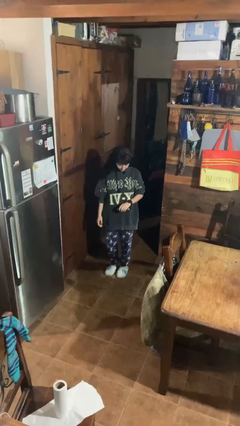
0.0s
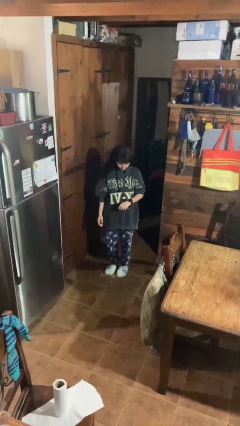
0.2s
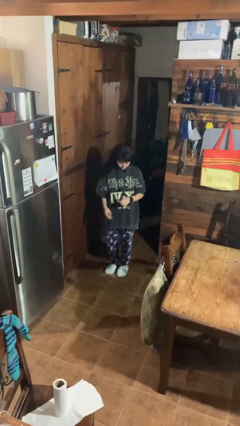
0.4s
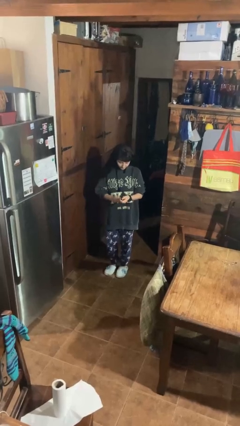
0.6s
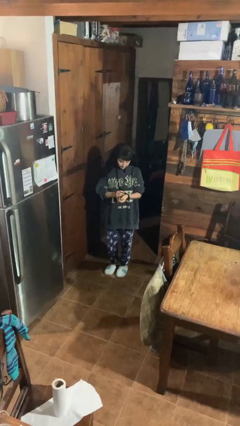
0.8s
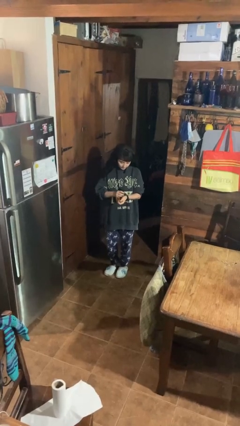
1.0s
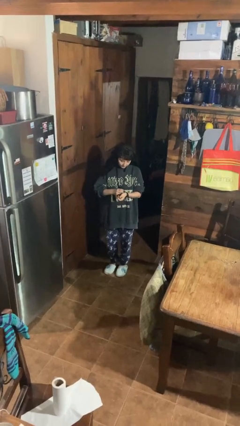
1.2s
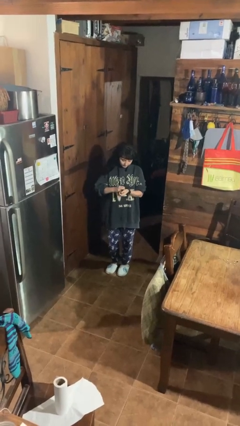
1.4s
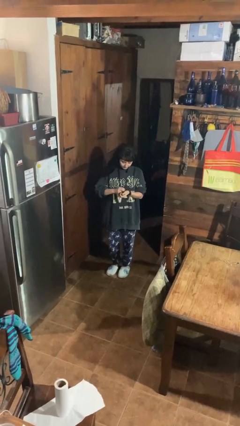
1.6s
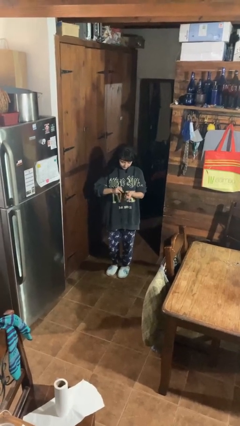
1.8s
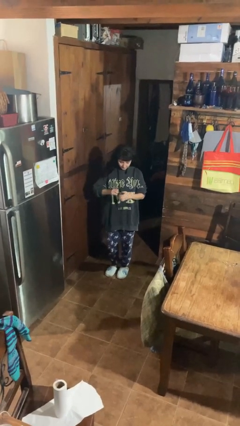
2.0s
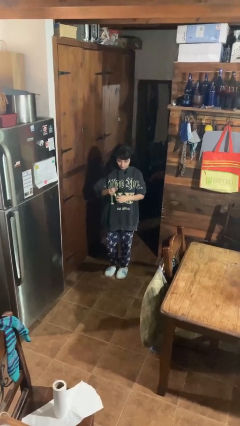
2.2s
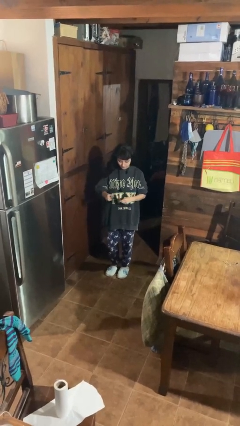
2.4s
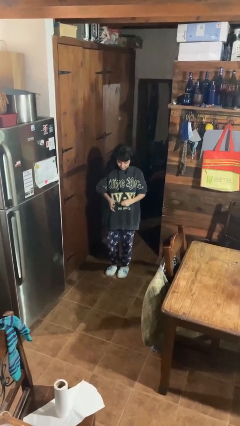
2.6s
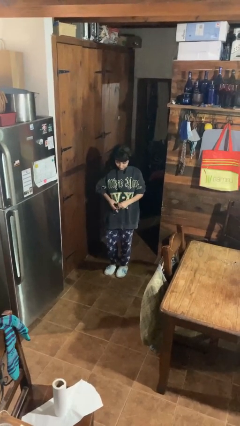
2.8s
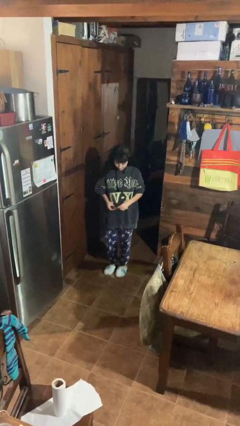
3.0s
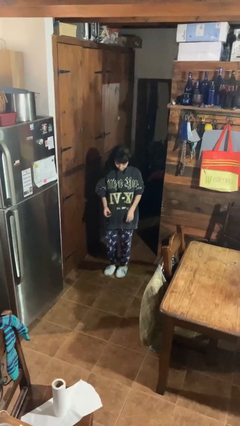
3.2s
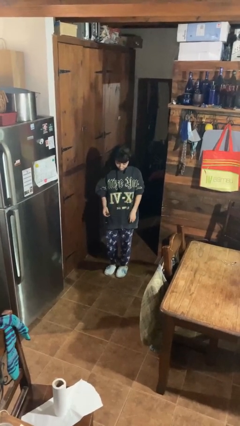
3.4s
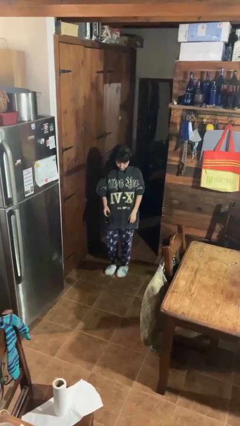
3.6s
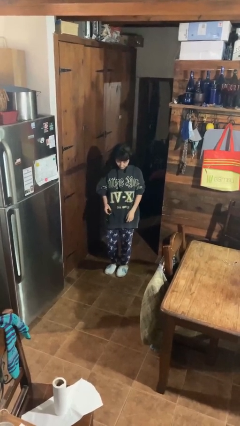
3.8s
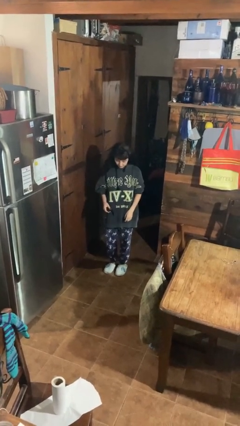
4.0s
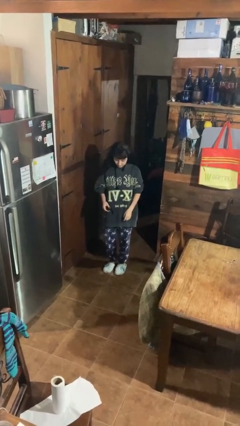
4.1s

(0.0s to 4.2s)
person takes off wristwatch

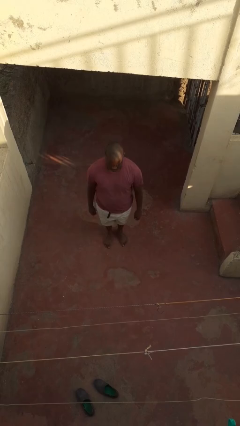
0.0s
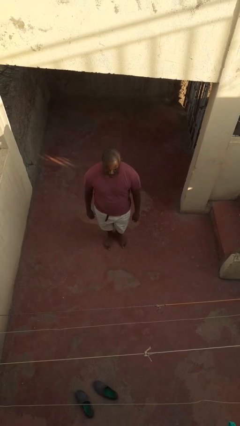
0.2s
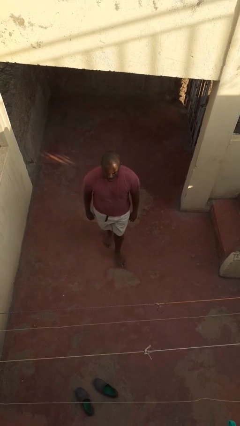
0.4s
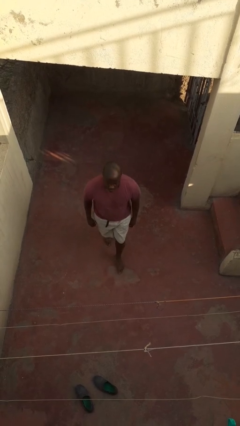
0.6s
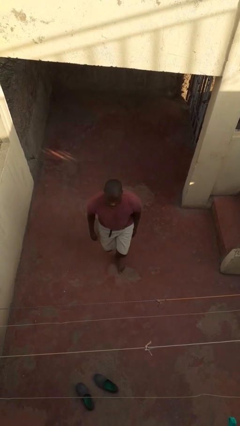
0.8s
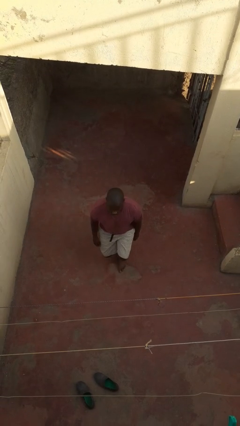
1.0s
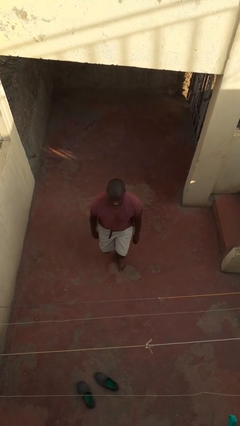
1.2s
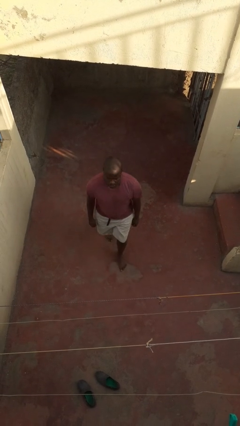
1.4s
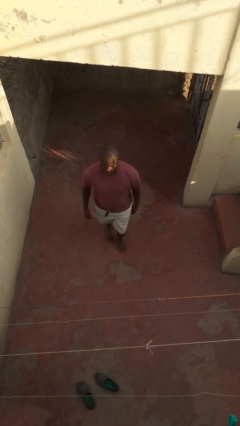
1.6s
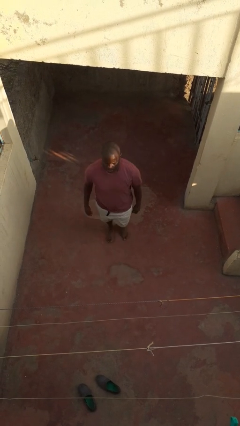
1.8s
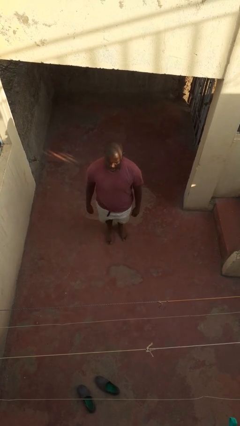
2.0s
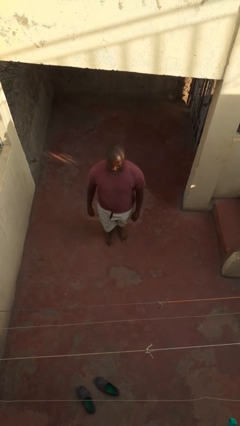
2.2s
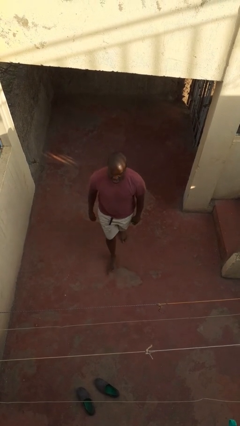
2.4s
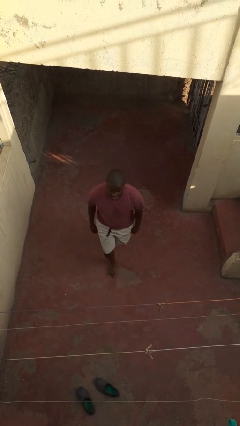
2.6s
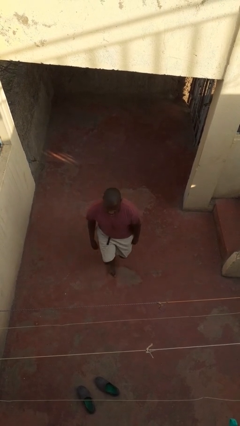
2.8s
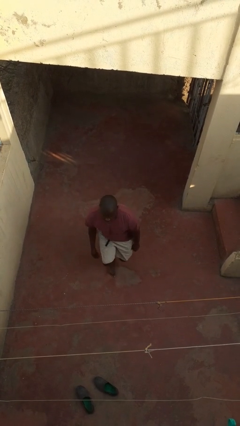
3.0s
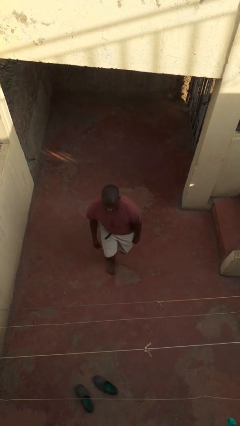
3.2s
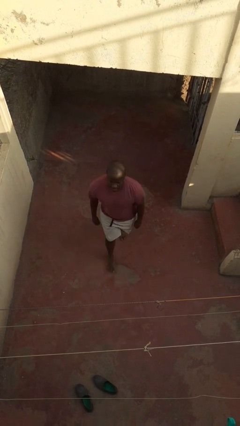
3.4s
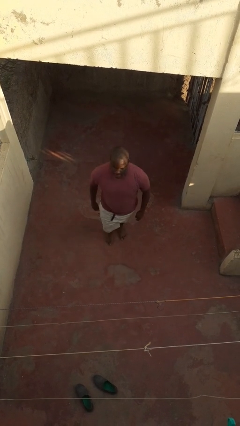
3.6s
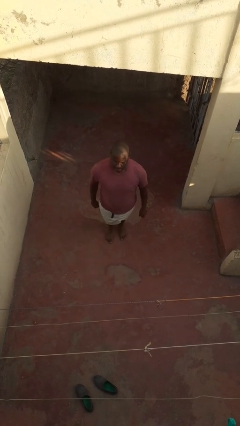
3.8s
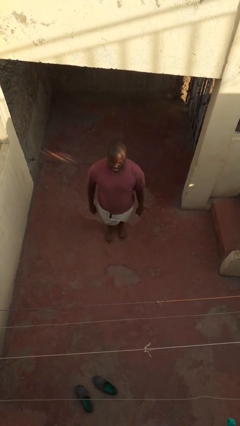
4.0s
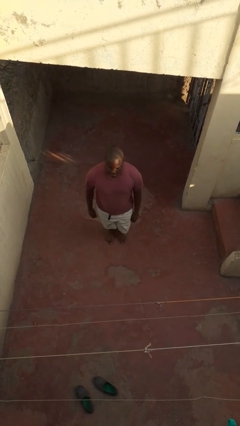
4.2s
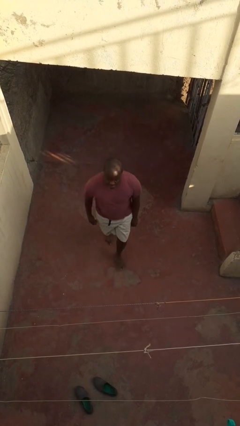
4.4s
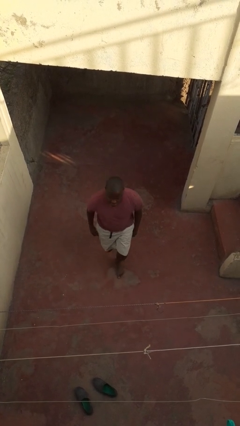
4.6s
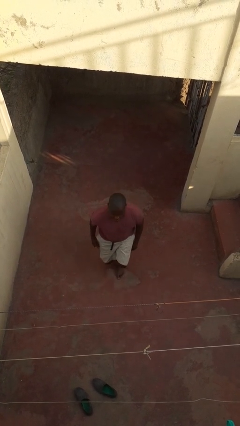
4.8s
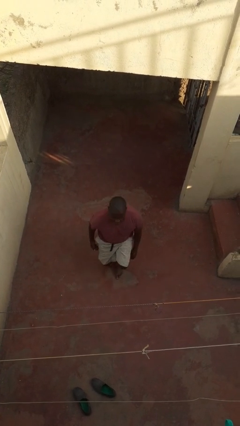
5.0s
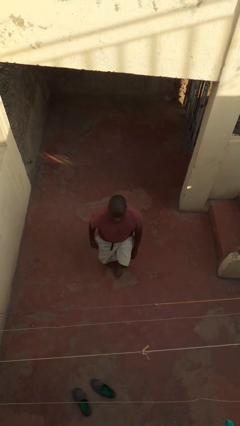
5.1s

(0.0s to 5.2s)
person exercises with lunges

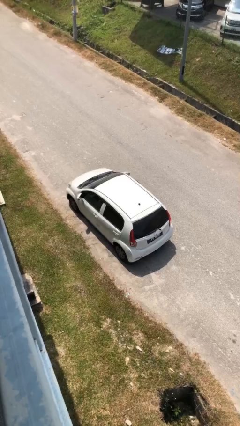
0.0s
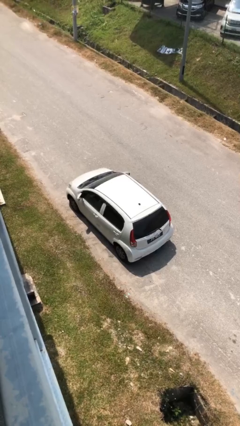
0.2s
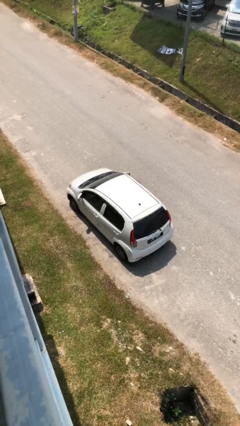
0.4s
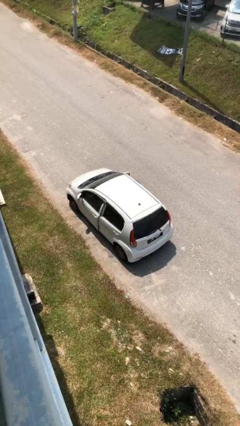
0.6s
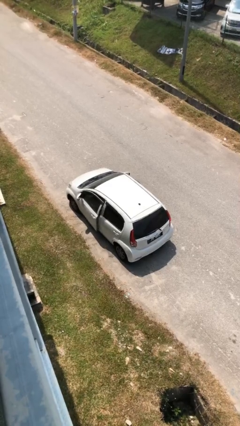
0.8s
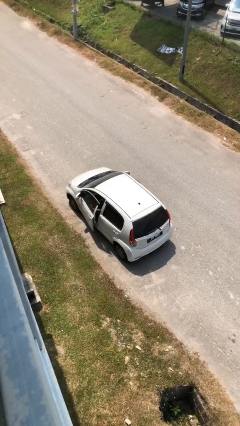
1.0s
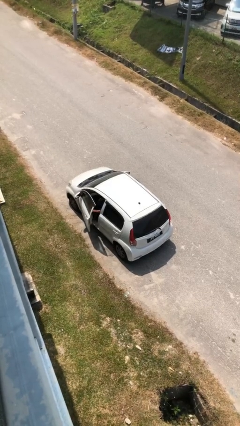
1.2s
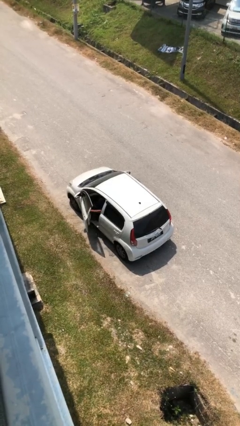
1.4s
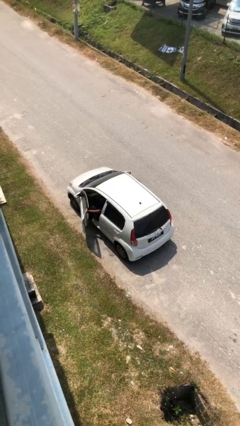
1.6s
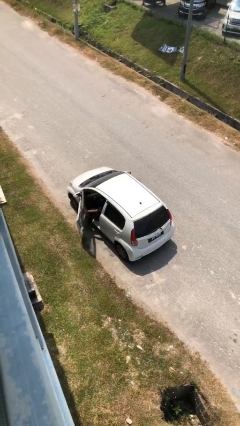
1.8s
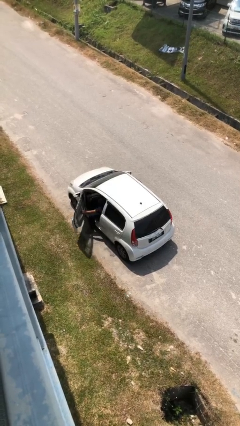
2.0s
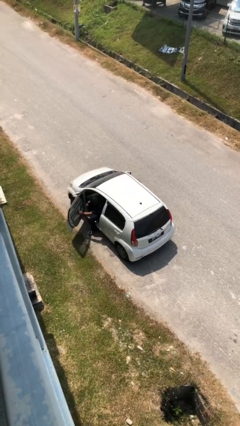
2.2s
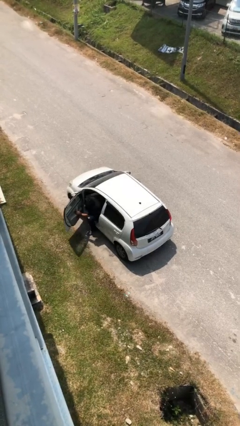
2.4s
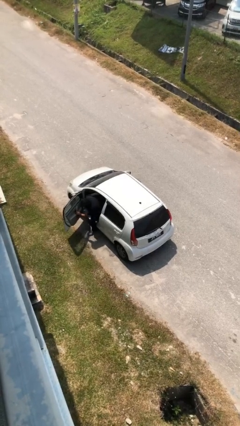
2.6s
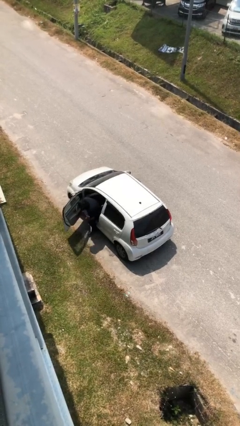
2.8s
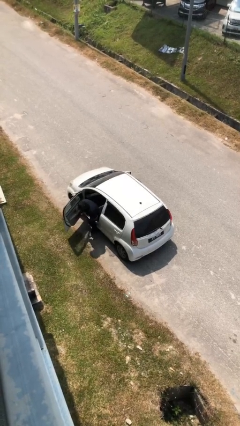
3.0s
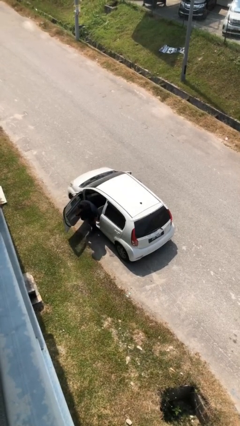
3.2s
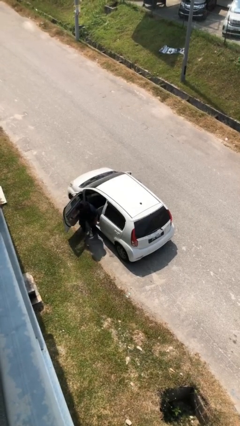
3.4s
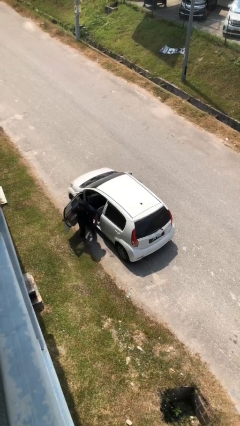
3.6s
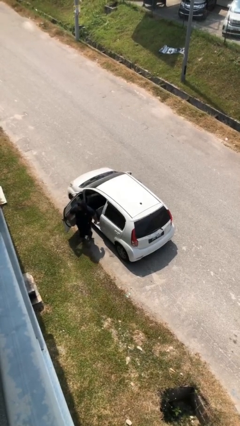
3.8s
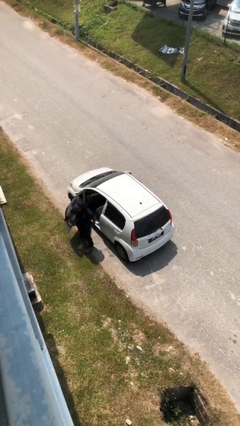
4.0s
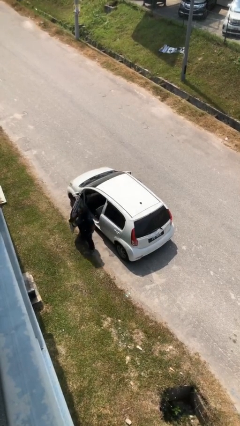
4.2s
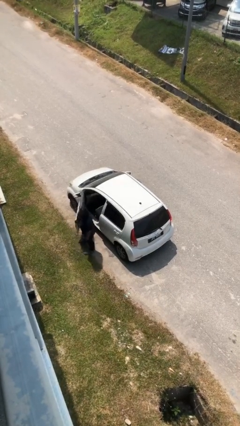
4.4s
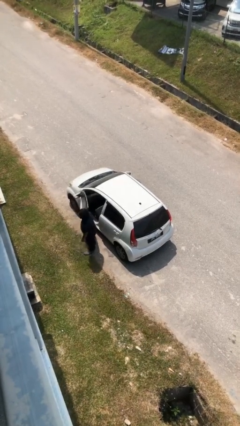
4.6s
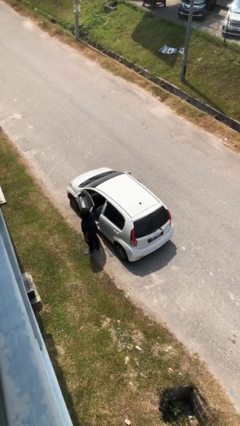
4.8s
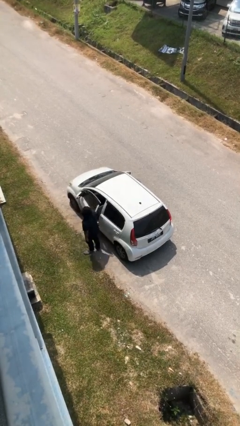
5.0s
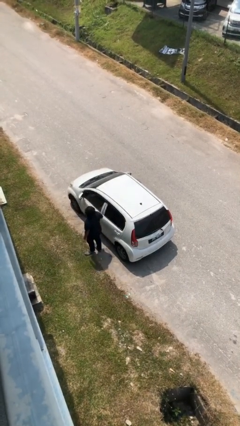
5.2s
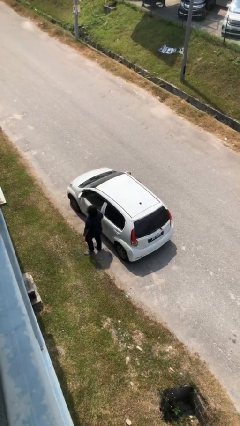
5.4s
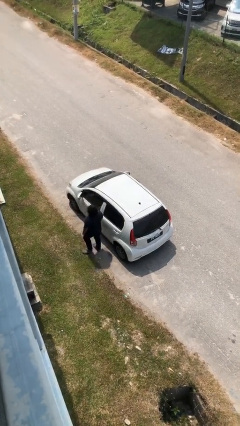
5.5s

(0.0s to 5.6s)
car drops off person

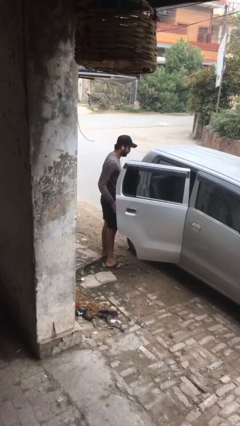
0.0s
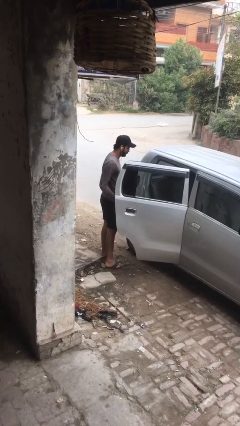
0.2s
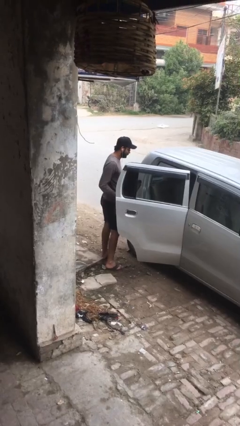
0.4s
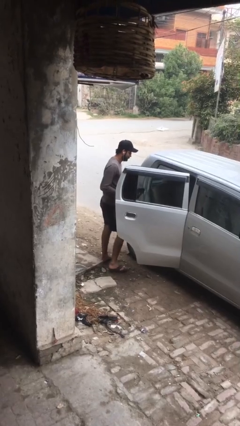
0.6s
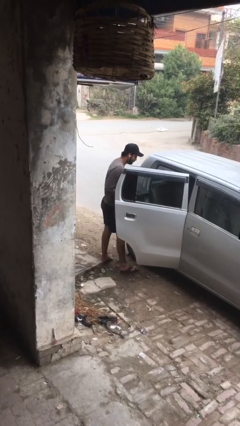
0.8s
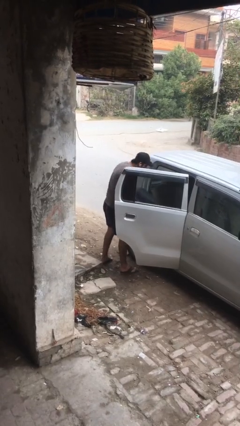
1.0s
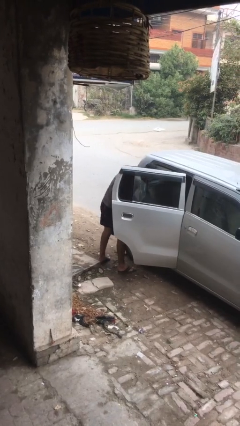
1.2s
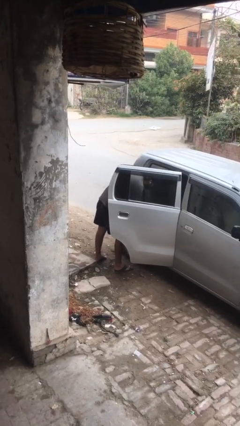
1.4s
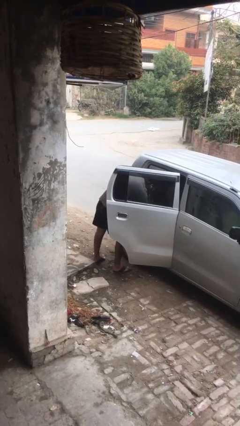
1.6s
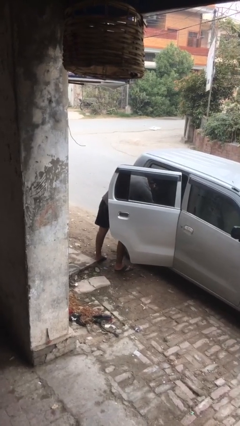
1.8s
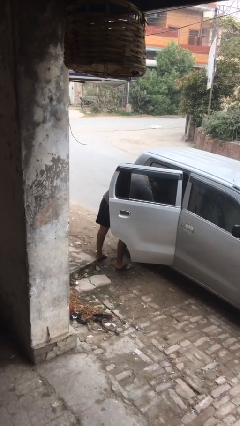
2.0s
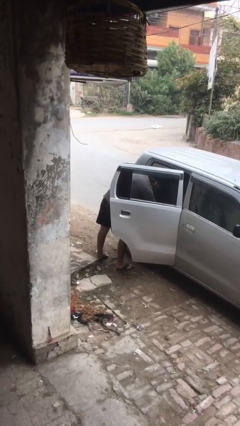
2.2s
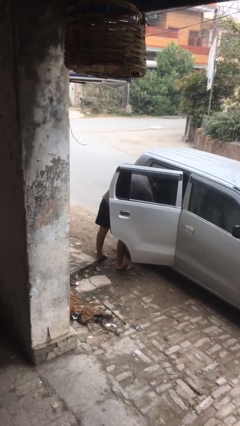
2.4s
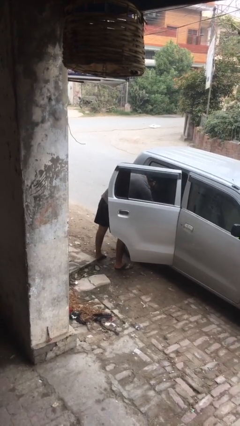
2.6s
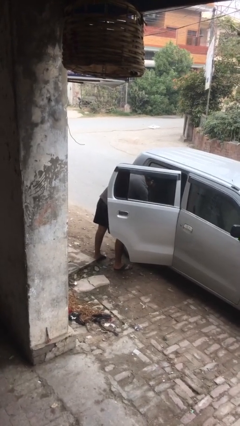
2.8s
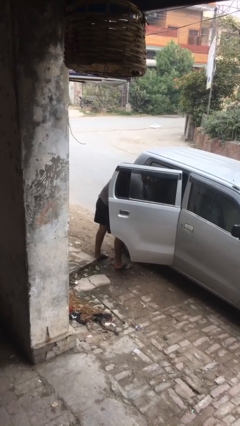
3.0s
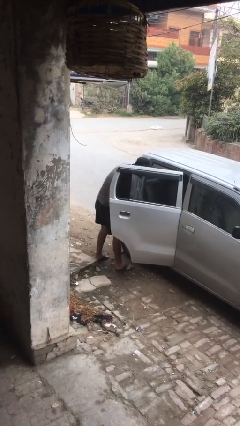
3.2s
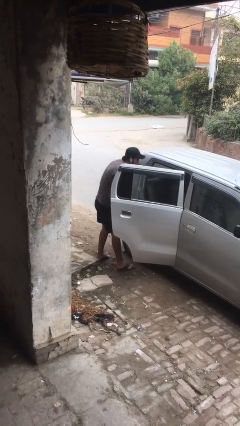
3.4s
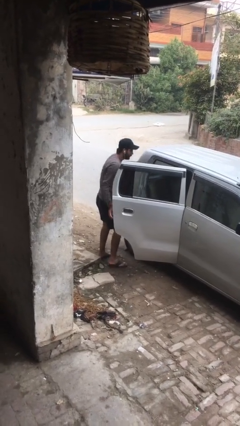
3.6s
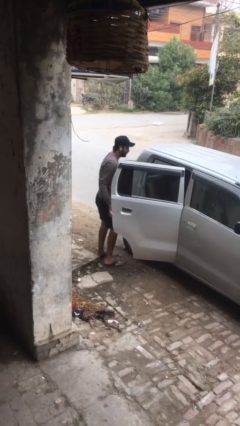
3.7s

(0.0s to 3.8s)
person loads car
